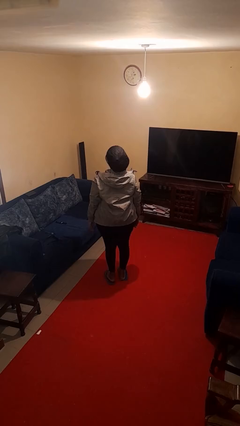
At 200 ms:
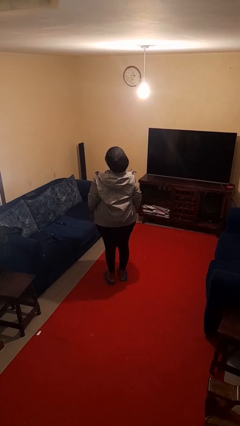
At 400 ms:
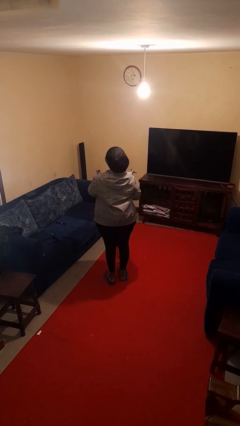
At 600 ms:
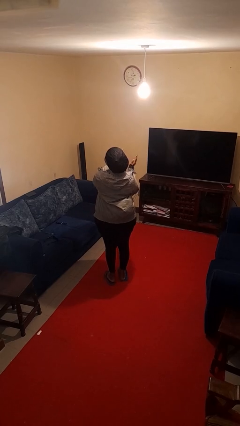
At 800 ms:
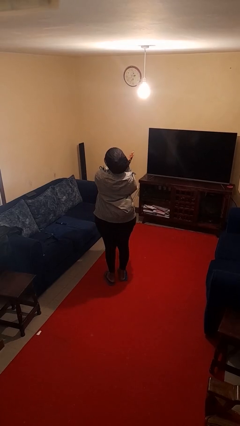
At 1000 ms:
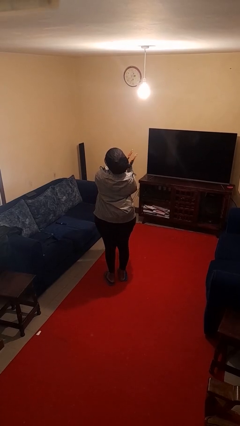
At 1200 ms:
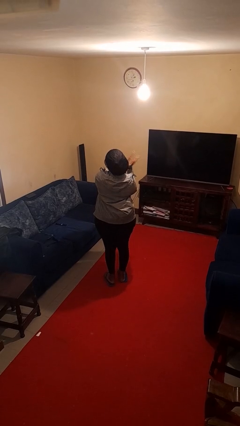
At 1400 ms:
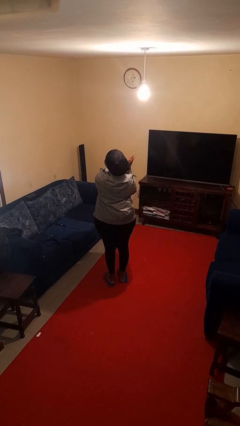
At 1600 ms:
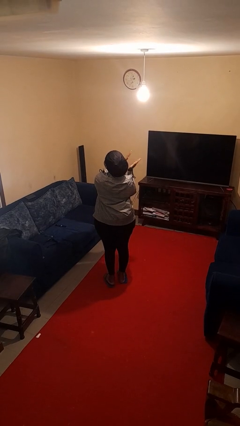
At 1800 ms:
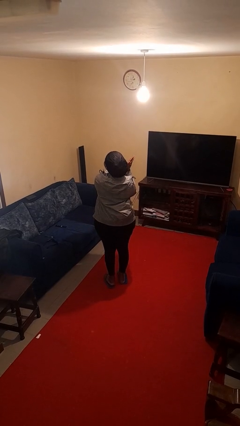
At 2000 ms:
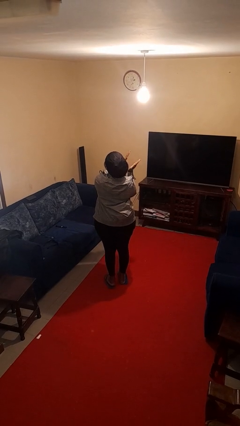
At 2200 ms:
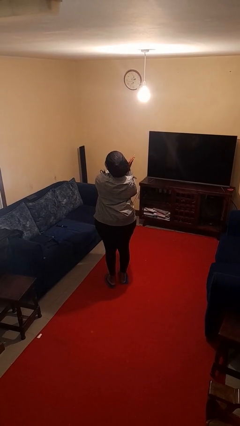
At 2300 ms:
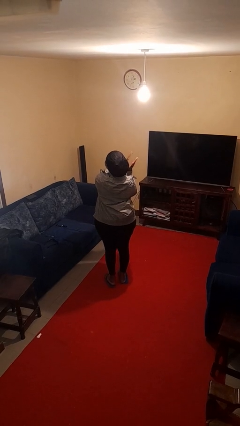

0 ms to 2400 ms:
person claps hands

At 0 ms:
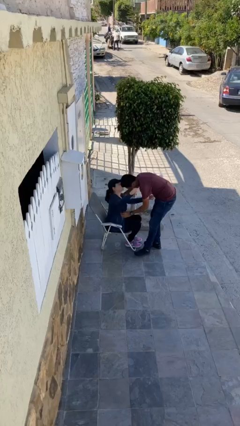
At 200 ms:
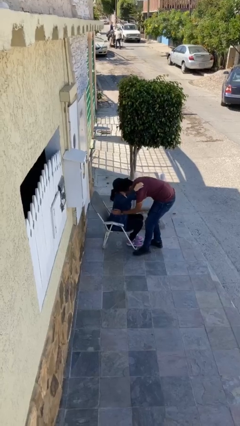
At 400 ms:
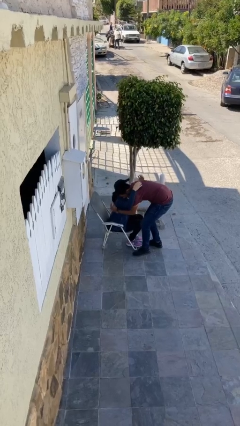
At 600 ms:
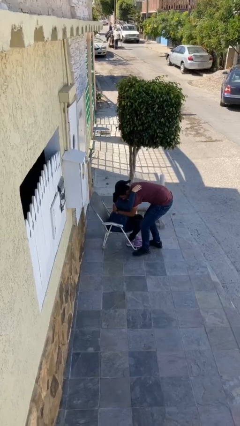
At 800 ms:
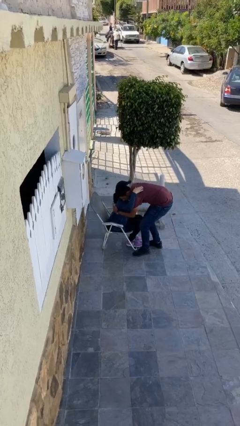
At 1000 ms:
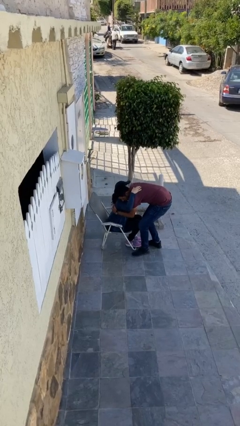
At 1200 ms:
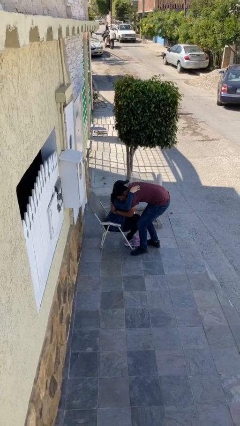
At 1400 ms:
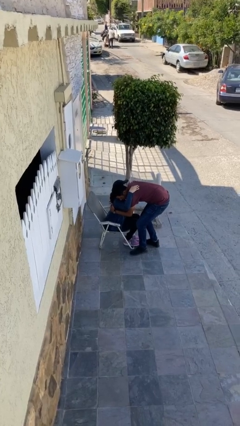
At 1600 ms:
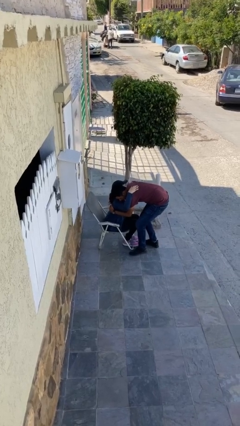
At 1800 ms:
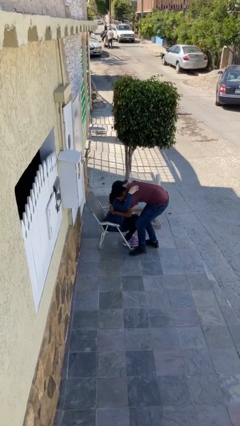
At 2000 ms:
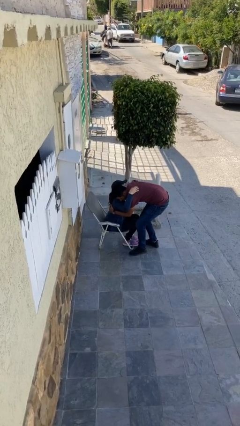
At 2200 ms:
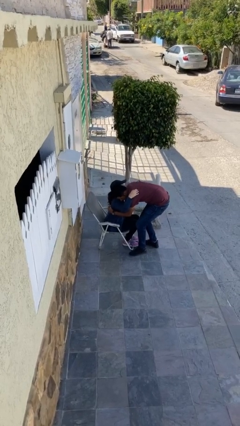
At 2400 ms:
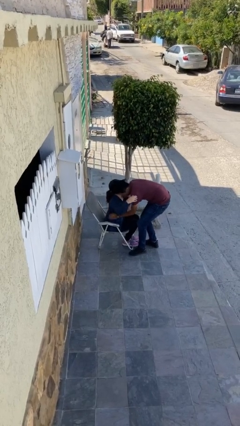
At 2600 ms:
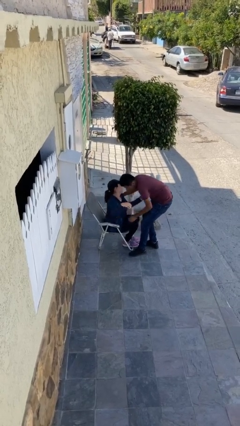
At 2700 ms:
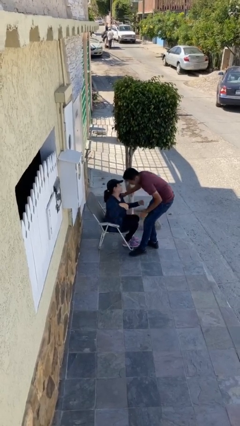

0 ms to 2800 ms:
person embraces person

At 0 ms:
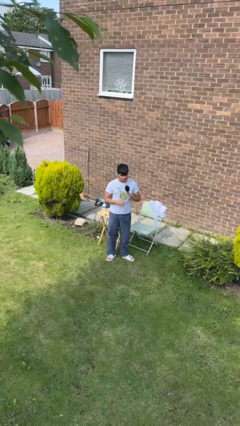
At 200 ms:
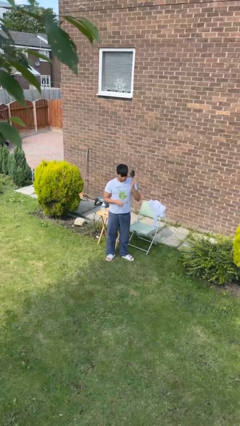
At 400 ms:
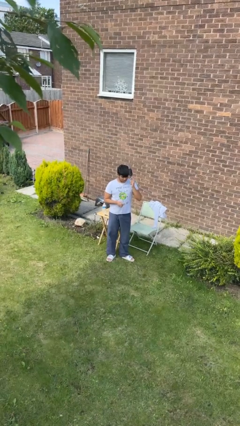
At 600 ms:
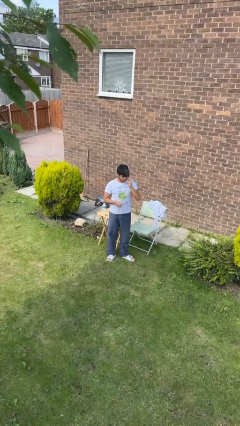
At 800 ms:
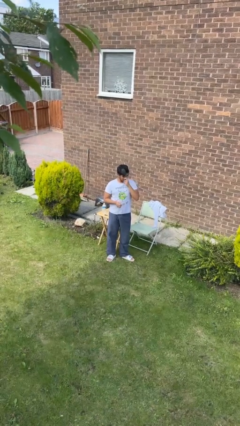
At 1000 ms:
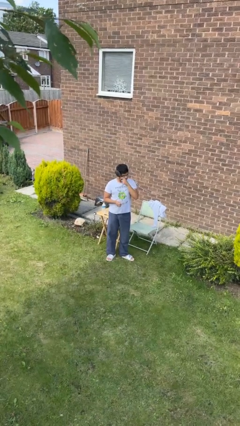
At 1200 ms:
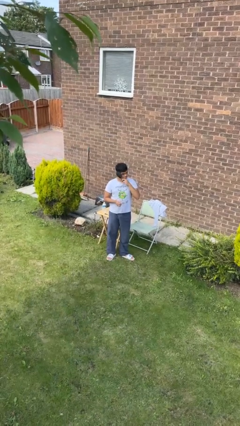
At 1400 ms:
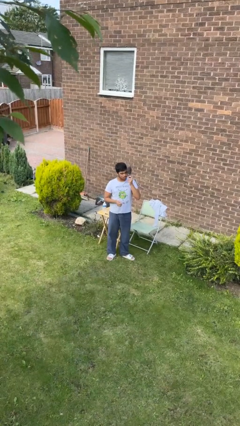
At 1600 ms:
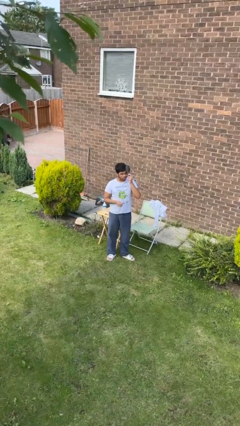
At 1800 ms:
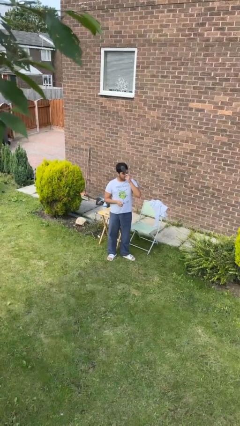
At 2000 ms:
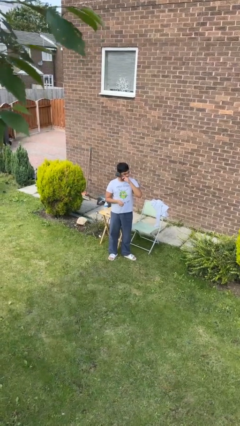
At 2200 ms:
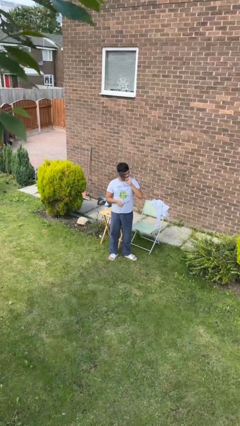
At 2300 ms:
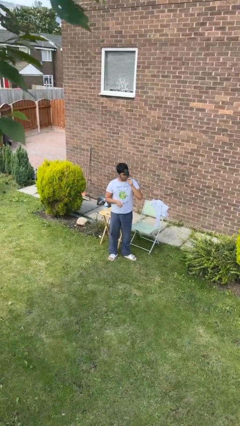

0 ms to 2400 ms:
person brushes hair

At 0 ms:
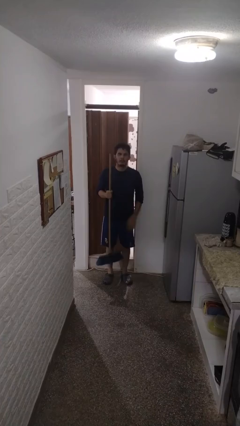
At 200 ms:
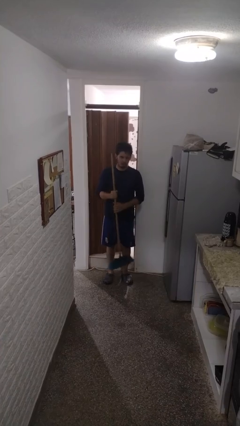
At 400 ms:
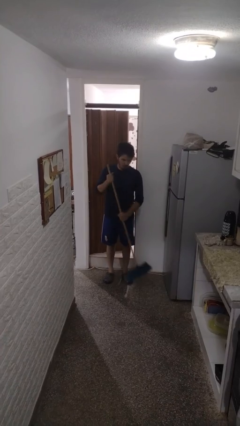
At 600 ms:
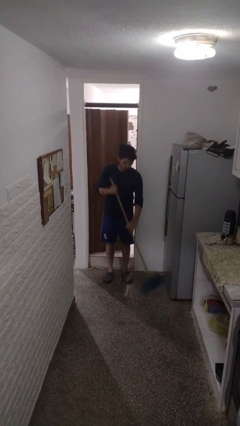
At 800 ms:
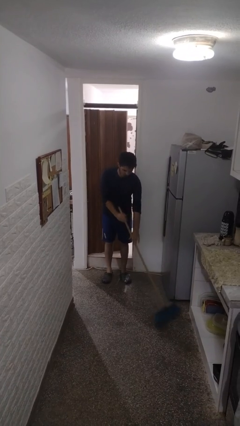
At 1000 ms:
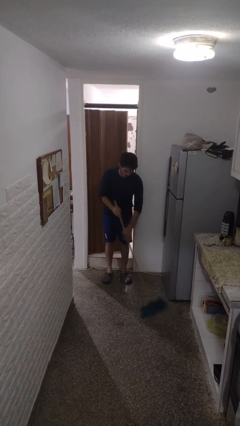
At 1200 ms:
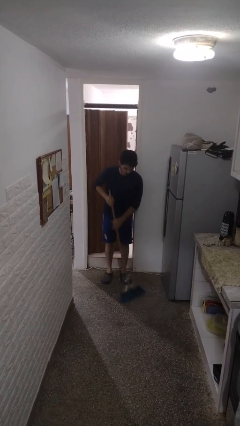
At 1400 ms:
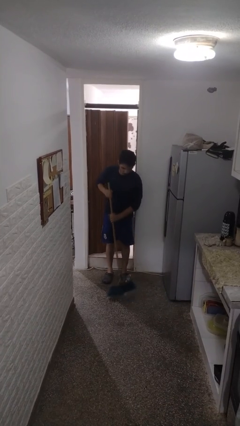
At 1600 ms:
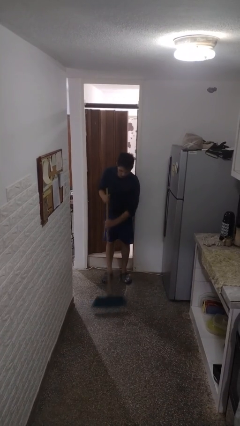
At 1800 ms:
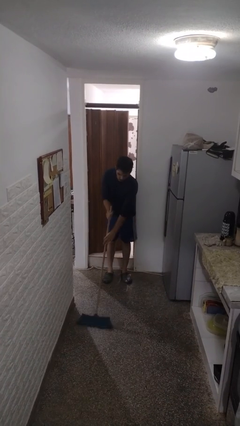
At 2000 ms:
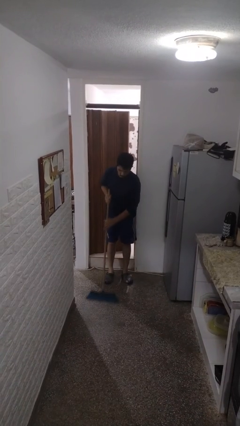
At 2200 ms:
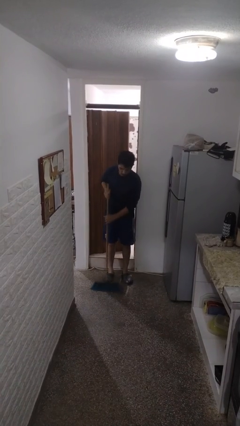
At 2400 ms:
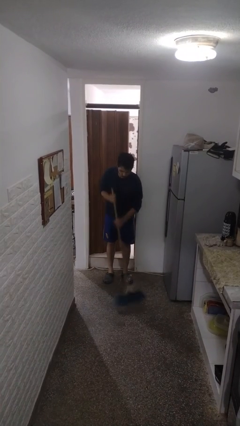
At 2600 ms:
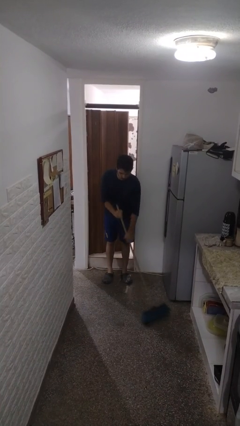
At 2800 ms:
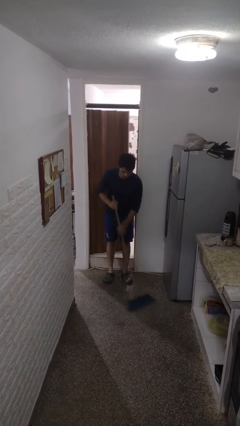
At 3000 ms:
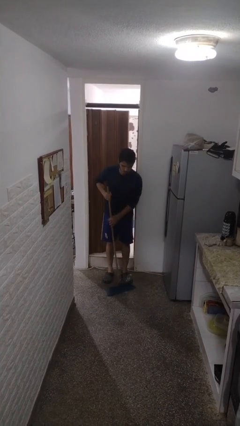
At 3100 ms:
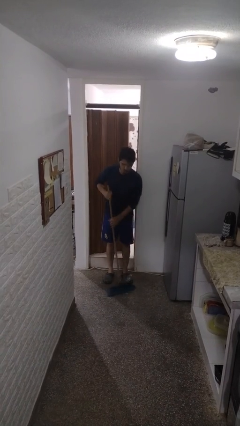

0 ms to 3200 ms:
person sweeps floor

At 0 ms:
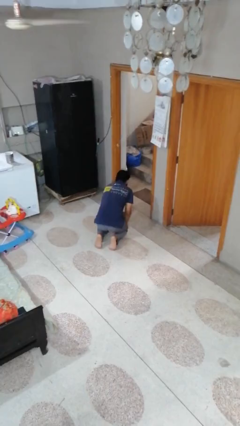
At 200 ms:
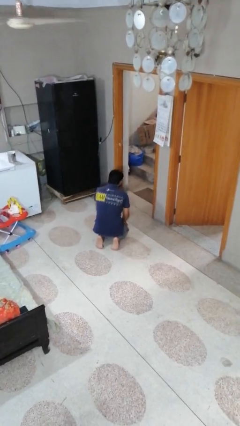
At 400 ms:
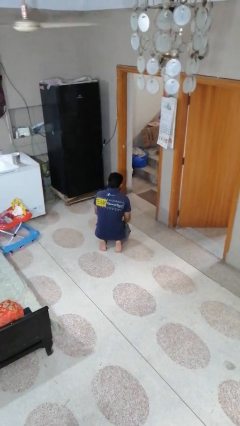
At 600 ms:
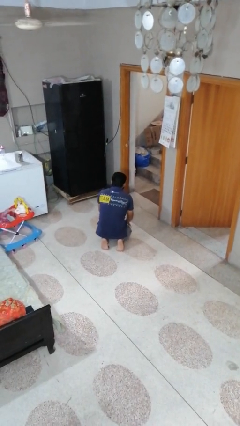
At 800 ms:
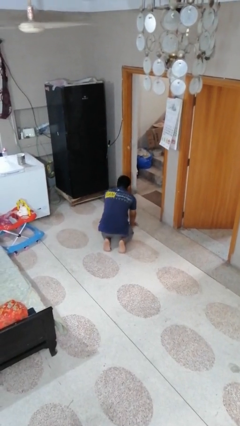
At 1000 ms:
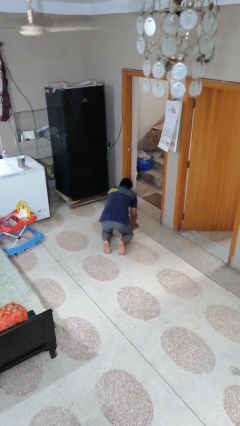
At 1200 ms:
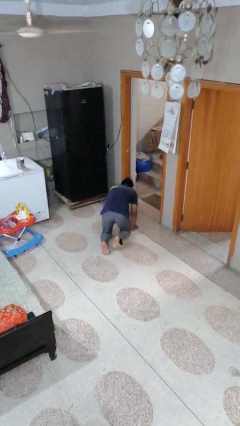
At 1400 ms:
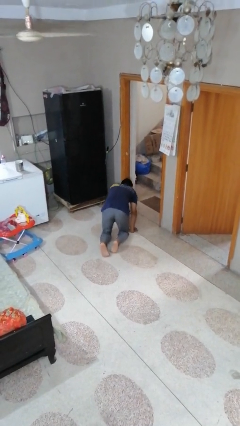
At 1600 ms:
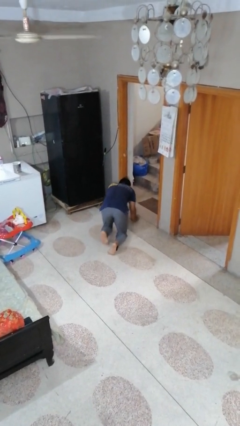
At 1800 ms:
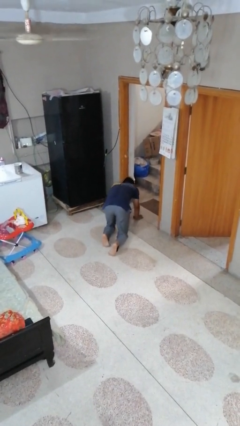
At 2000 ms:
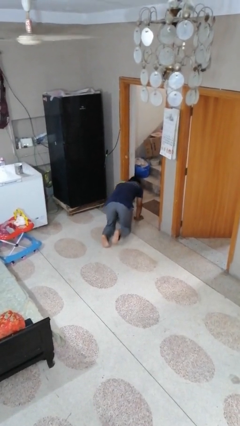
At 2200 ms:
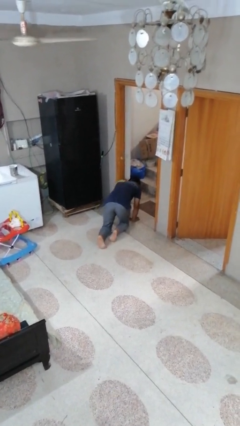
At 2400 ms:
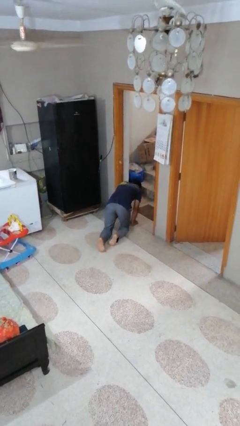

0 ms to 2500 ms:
person crawls

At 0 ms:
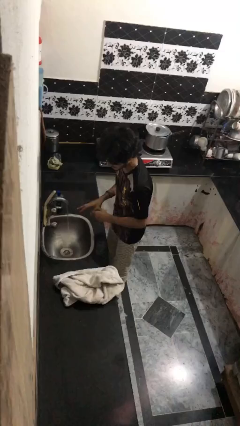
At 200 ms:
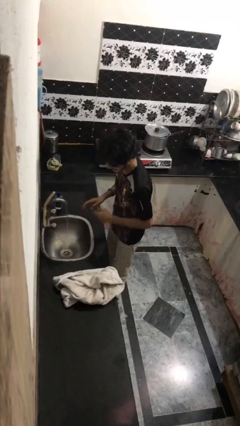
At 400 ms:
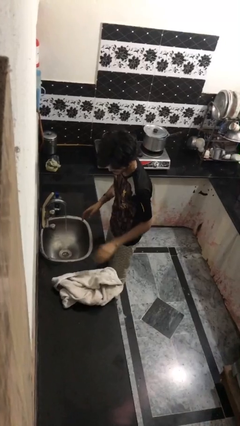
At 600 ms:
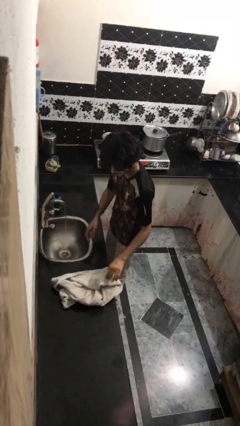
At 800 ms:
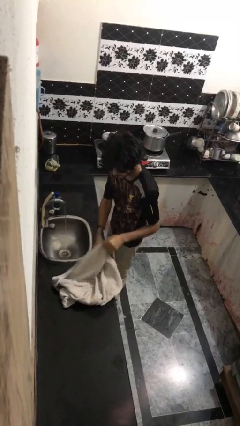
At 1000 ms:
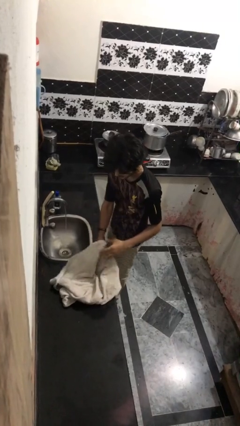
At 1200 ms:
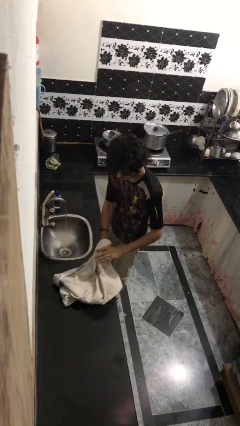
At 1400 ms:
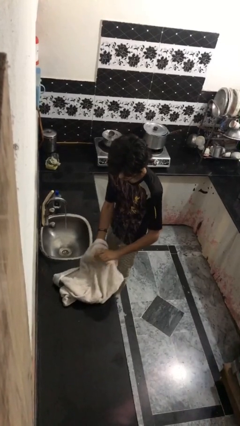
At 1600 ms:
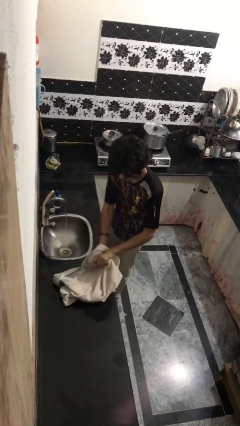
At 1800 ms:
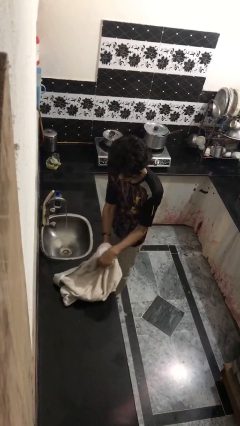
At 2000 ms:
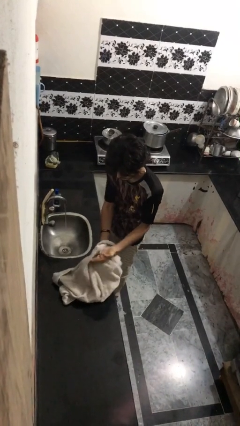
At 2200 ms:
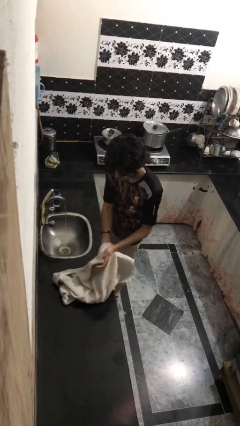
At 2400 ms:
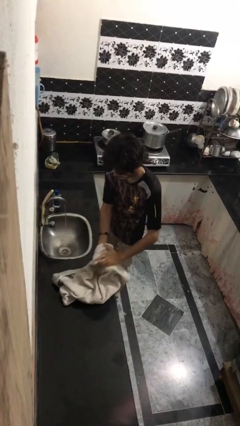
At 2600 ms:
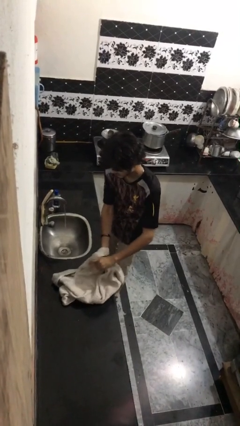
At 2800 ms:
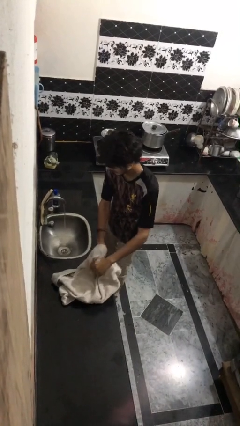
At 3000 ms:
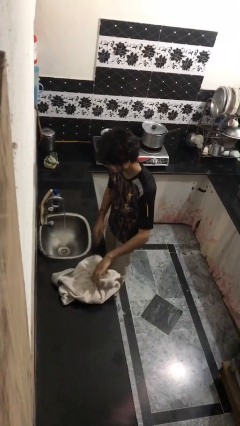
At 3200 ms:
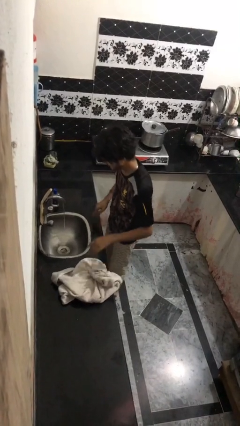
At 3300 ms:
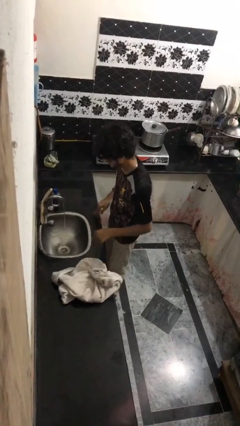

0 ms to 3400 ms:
person dries hands with towel

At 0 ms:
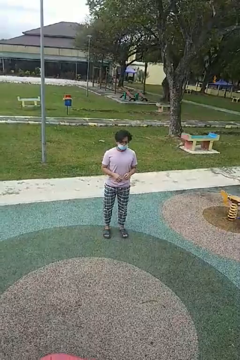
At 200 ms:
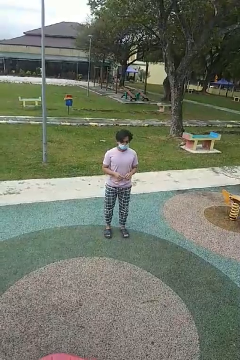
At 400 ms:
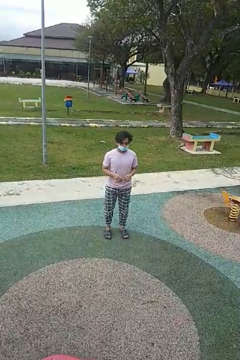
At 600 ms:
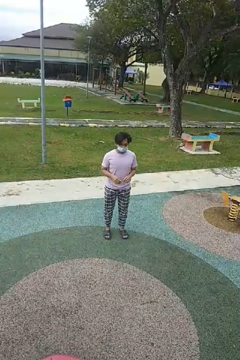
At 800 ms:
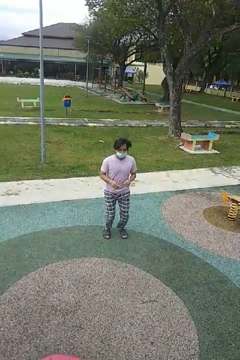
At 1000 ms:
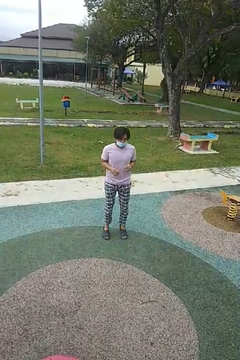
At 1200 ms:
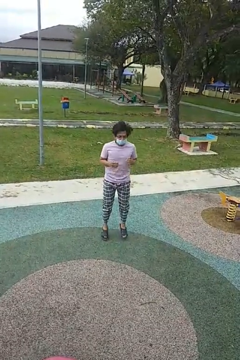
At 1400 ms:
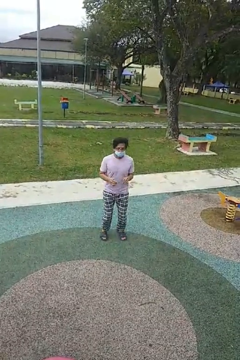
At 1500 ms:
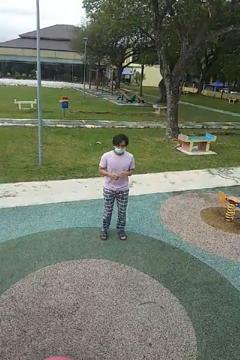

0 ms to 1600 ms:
person jumps
